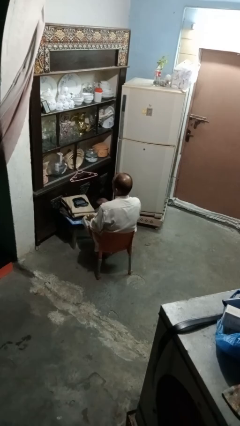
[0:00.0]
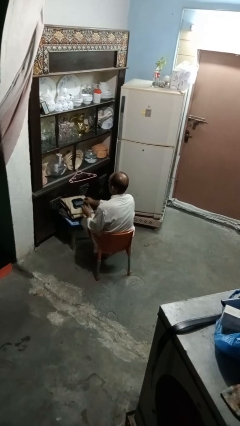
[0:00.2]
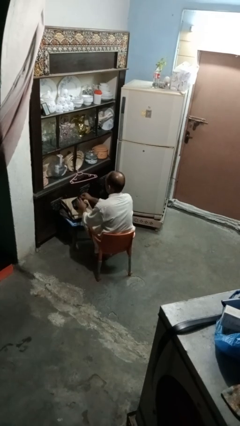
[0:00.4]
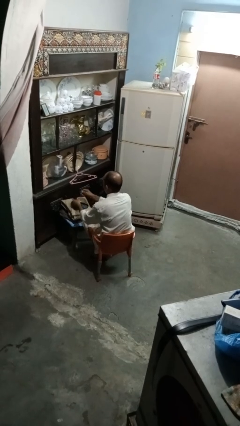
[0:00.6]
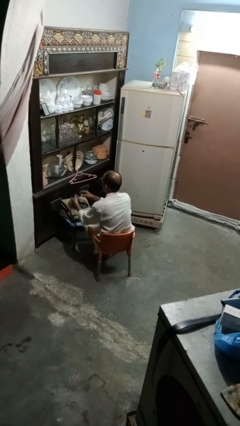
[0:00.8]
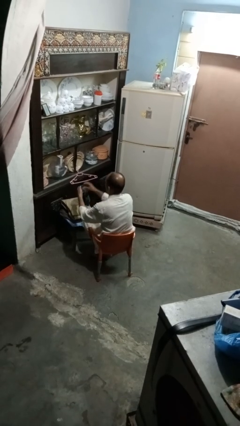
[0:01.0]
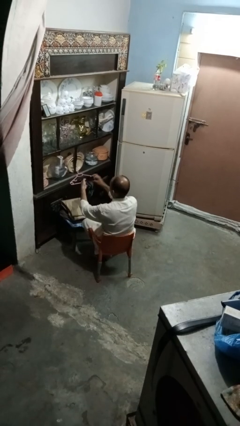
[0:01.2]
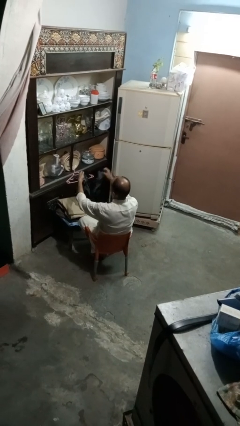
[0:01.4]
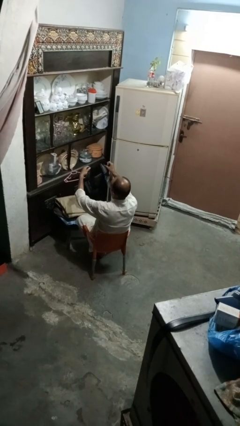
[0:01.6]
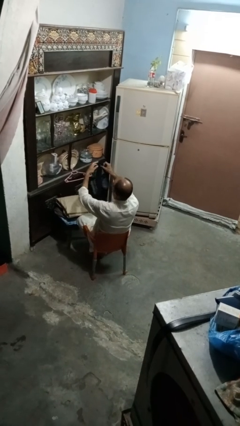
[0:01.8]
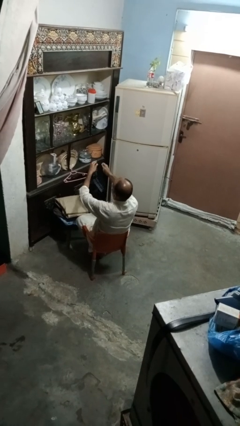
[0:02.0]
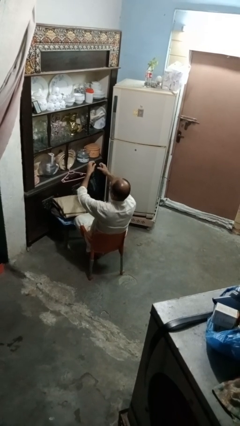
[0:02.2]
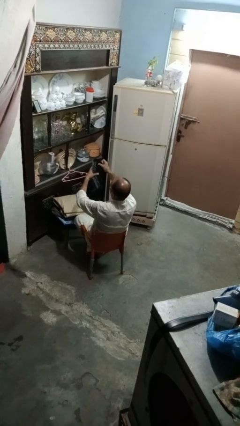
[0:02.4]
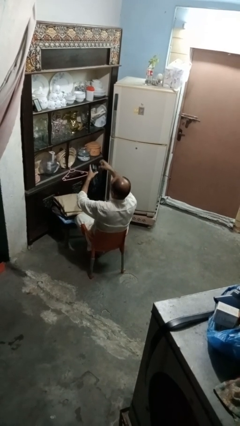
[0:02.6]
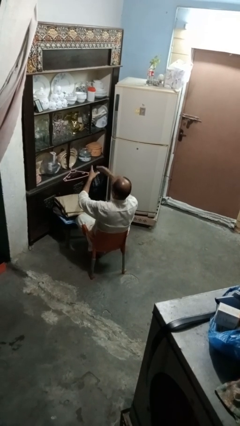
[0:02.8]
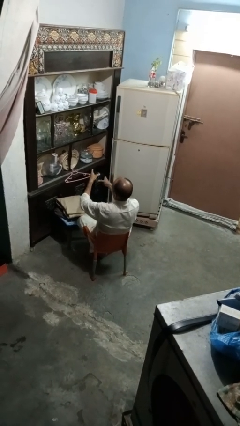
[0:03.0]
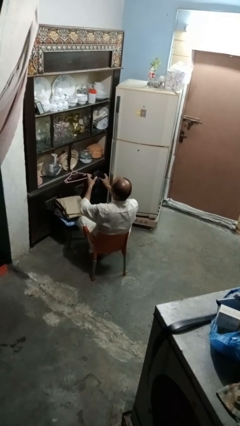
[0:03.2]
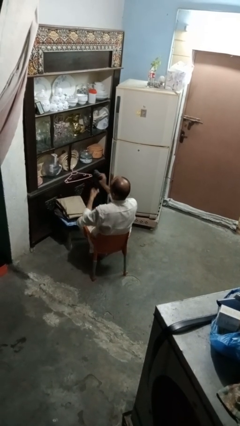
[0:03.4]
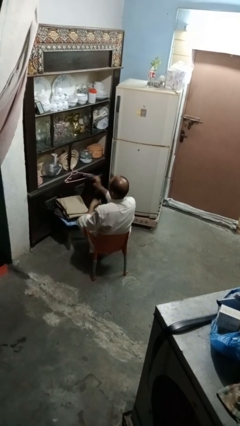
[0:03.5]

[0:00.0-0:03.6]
person folds socks

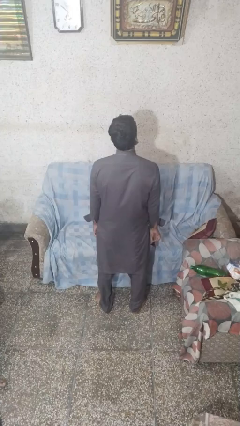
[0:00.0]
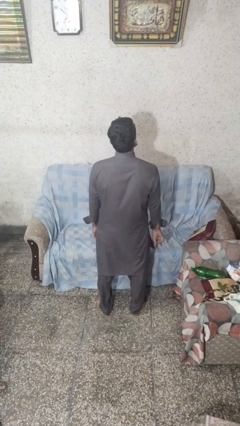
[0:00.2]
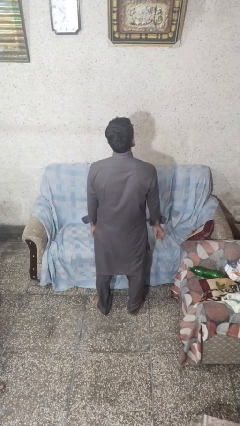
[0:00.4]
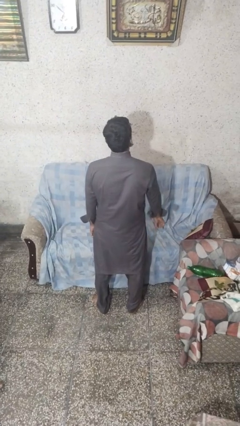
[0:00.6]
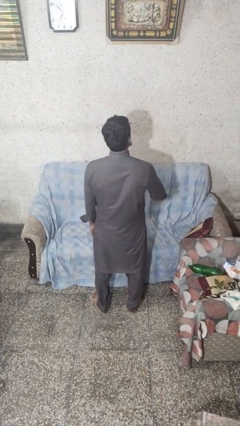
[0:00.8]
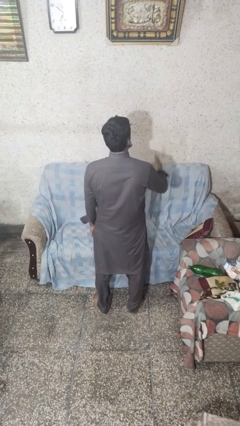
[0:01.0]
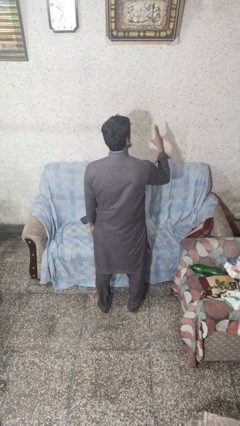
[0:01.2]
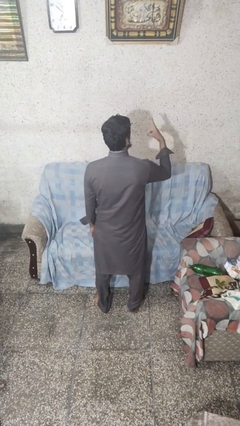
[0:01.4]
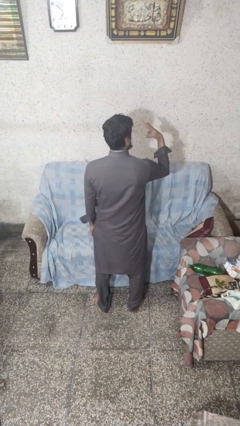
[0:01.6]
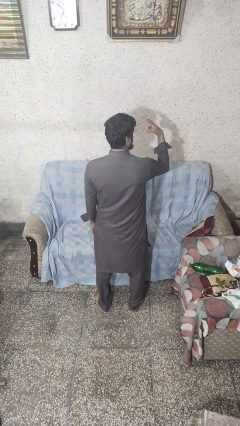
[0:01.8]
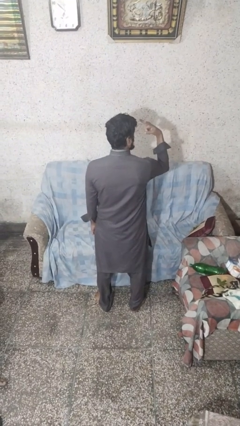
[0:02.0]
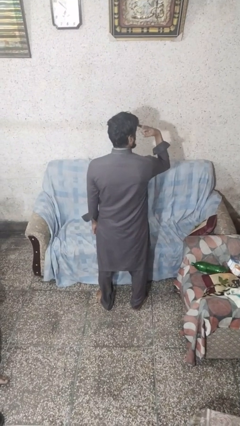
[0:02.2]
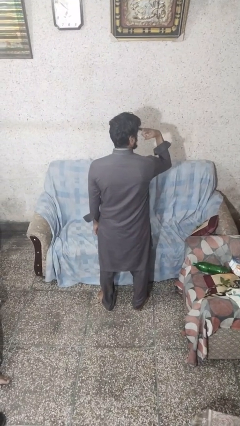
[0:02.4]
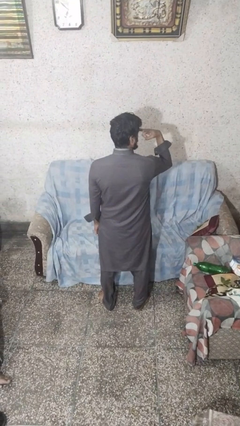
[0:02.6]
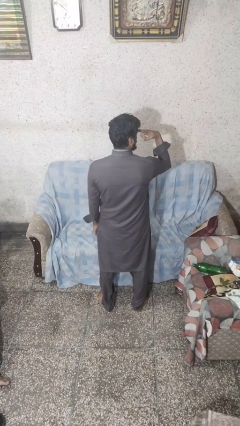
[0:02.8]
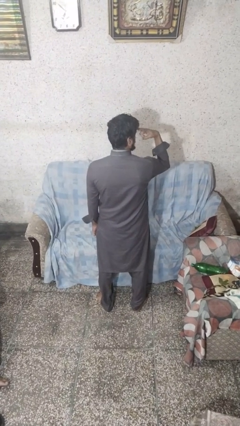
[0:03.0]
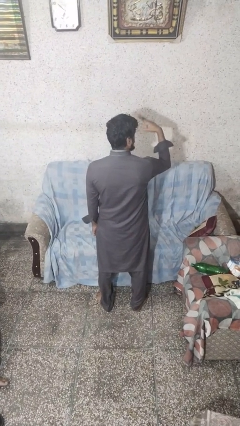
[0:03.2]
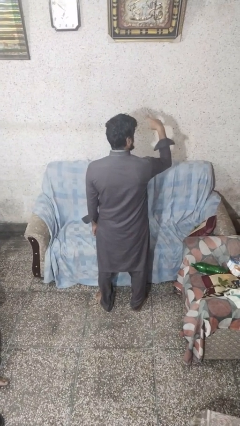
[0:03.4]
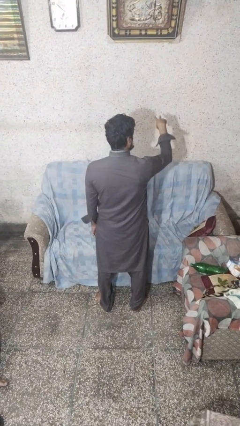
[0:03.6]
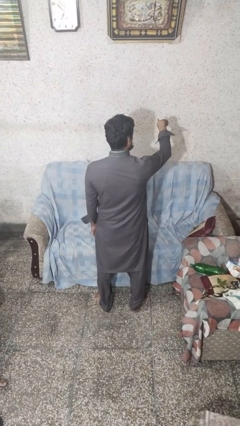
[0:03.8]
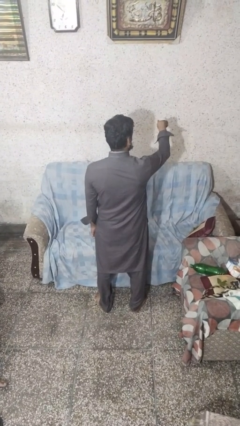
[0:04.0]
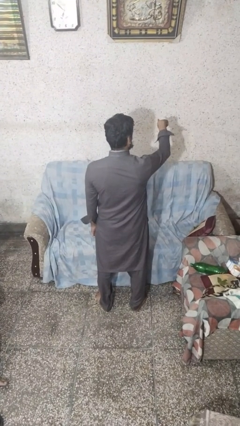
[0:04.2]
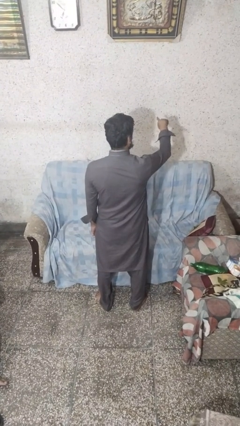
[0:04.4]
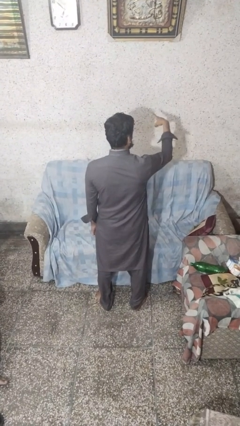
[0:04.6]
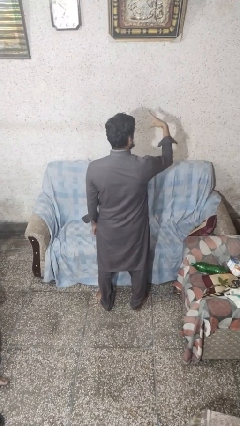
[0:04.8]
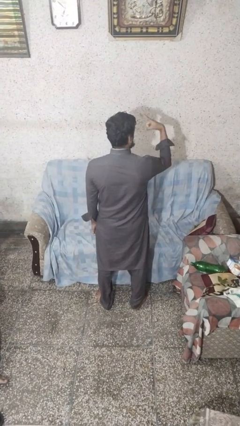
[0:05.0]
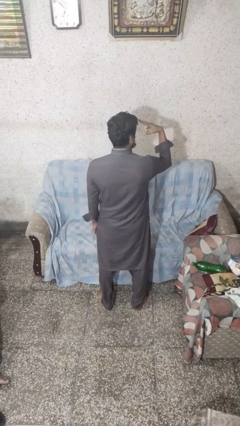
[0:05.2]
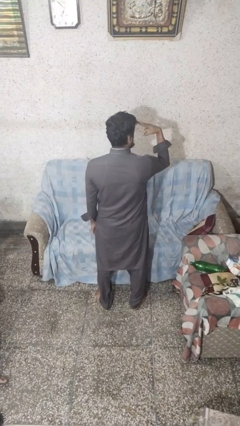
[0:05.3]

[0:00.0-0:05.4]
person gestures watch closely

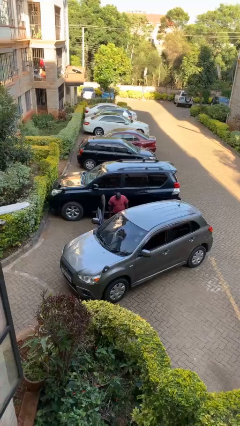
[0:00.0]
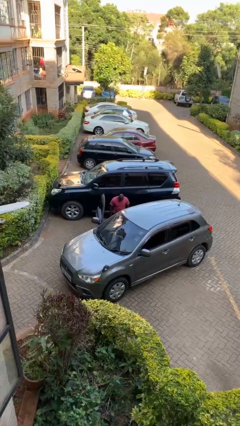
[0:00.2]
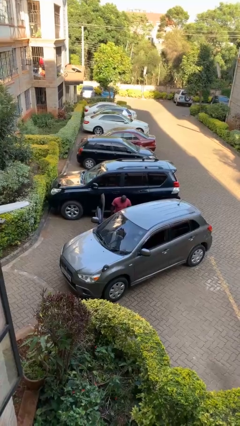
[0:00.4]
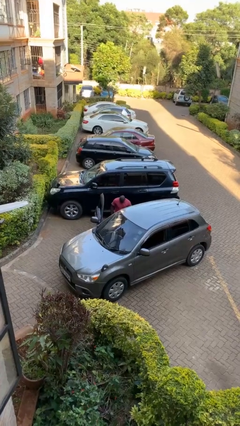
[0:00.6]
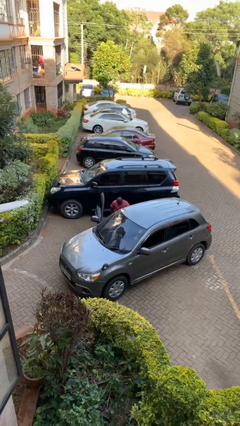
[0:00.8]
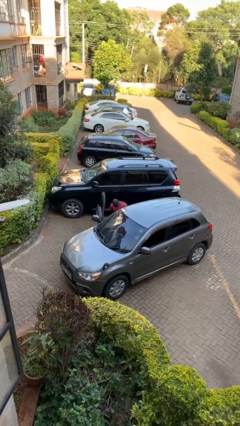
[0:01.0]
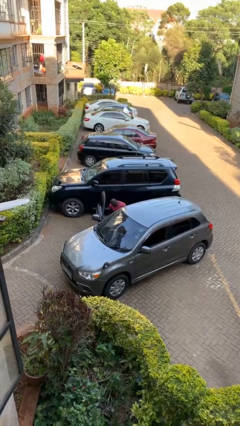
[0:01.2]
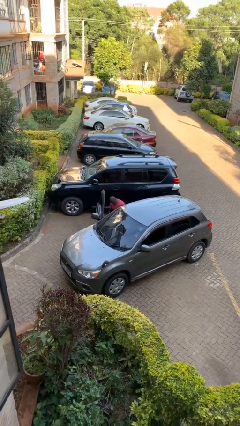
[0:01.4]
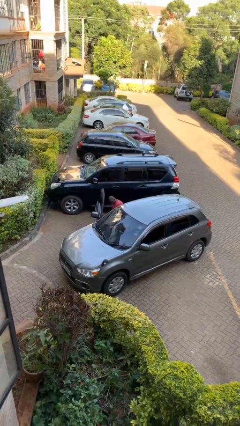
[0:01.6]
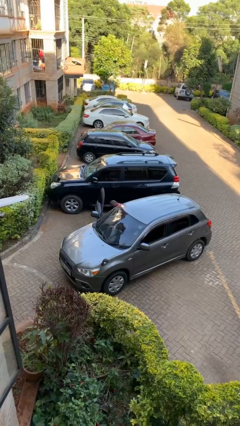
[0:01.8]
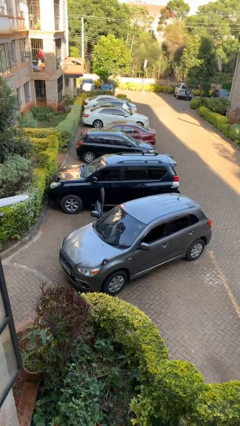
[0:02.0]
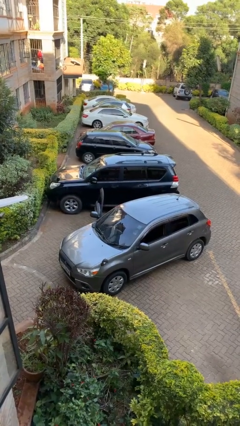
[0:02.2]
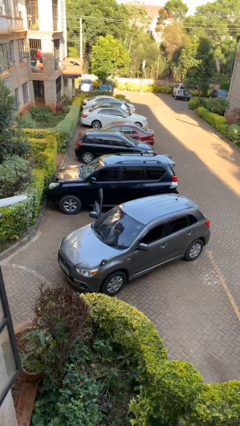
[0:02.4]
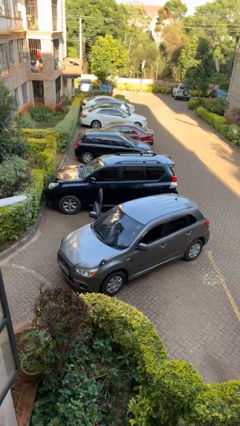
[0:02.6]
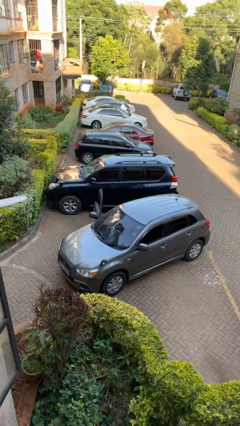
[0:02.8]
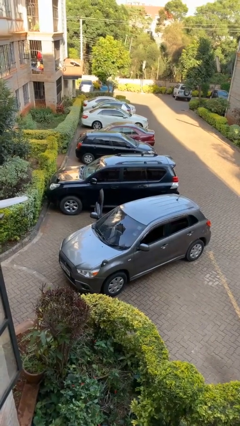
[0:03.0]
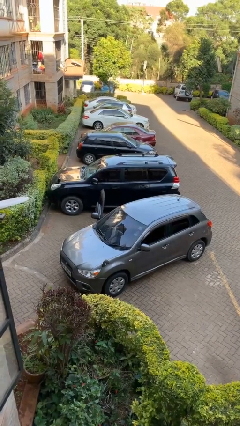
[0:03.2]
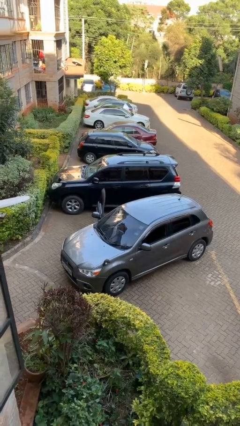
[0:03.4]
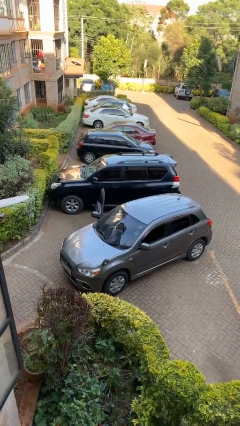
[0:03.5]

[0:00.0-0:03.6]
person enters car

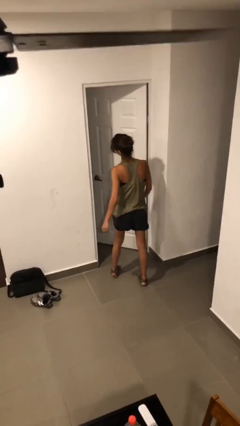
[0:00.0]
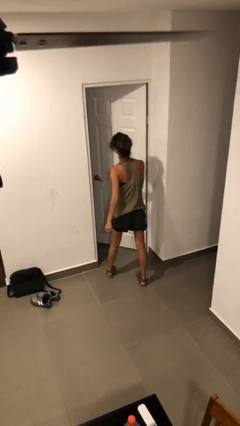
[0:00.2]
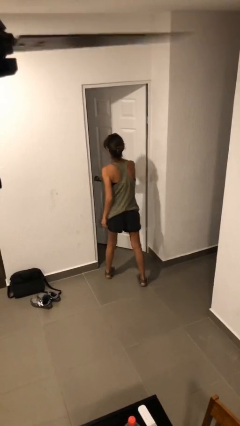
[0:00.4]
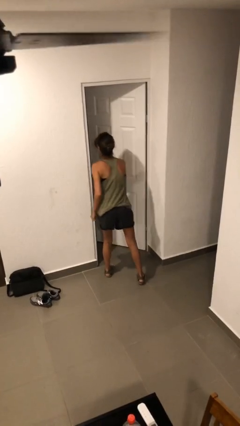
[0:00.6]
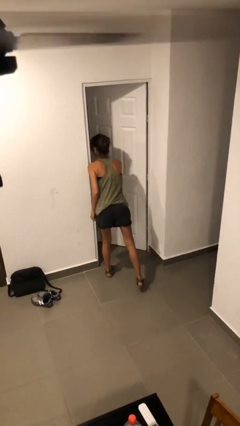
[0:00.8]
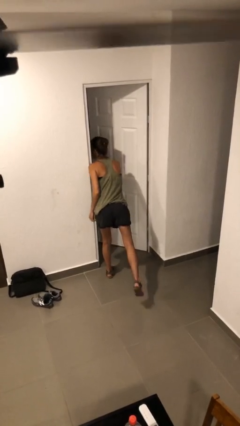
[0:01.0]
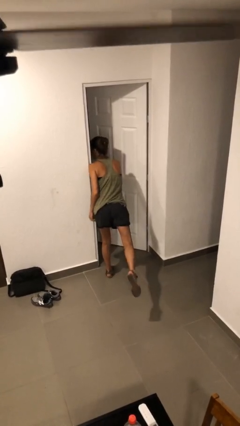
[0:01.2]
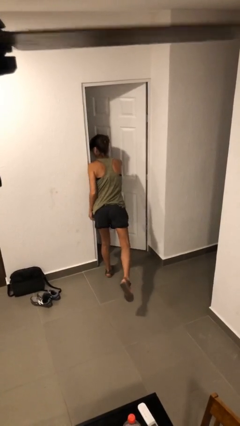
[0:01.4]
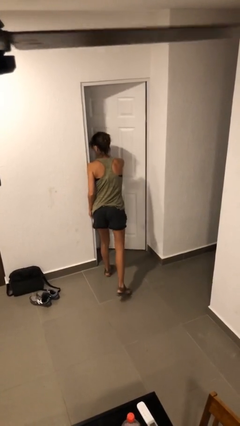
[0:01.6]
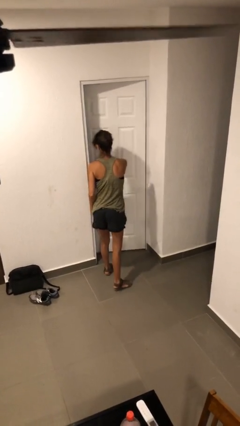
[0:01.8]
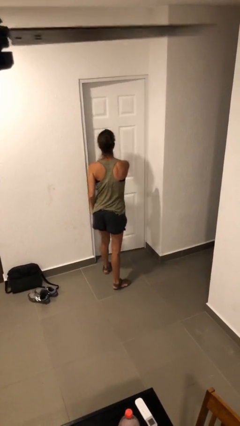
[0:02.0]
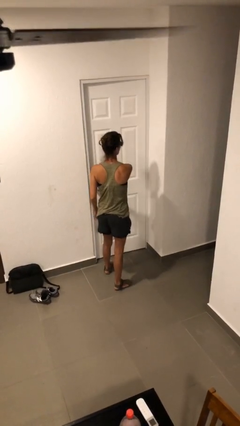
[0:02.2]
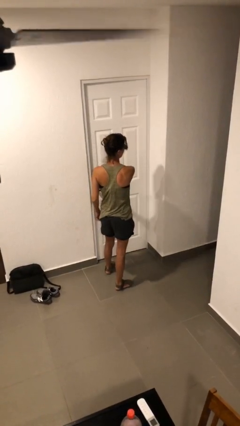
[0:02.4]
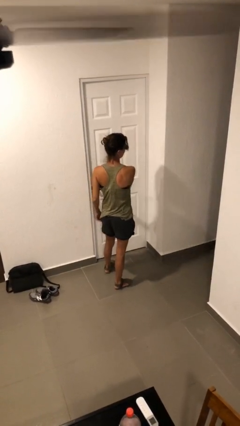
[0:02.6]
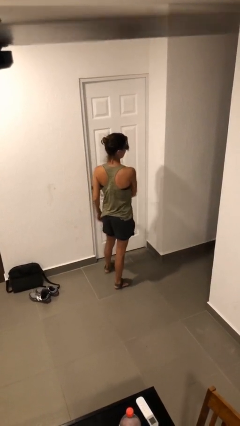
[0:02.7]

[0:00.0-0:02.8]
person closes facility door

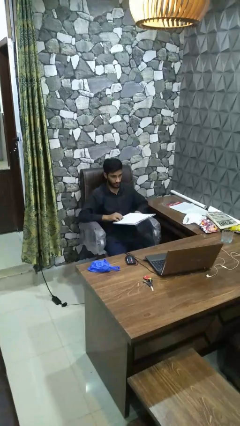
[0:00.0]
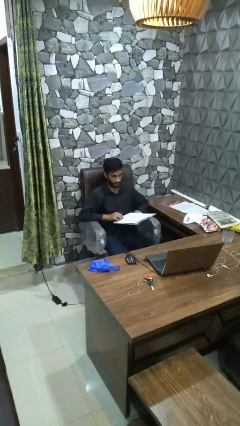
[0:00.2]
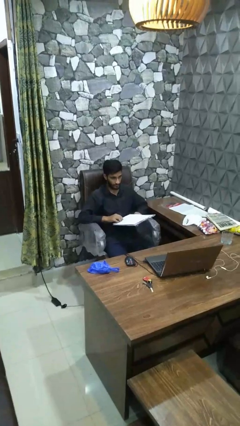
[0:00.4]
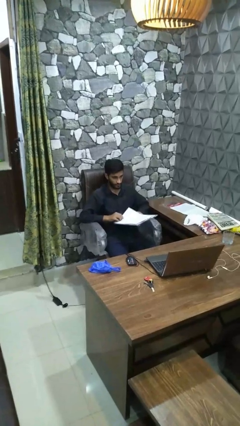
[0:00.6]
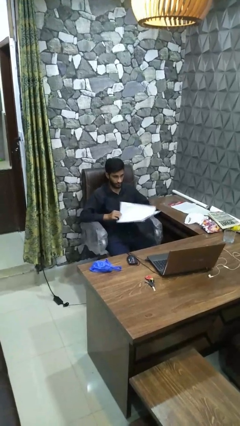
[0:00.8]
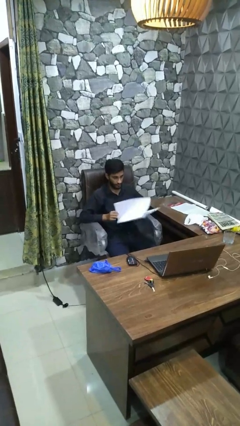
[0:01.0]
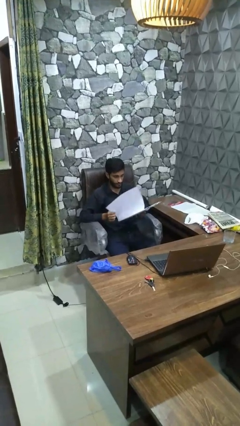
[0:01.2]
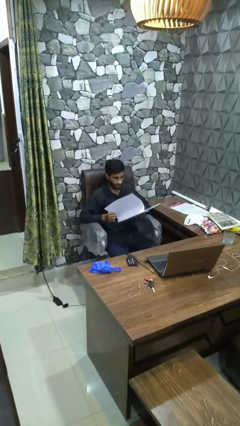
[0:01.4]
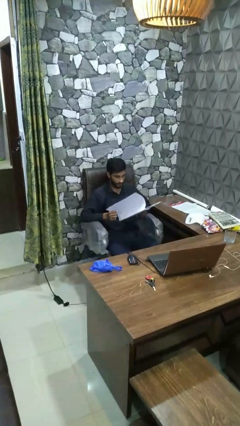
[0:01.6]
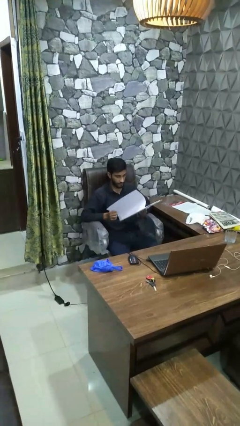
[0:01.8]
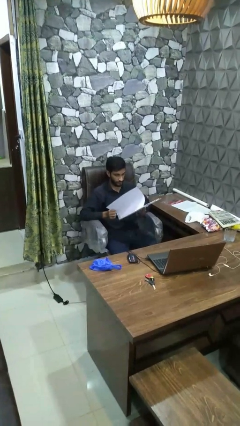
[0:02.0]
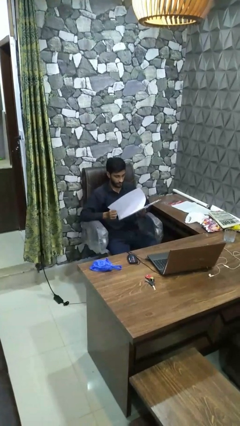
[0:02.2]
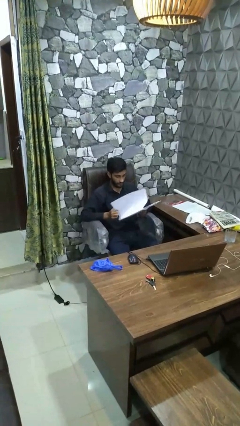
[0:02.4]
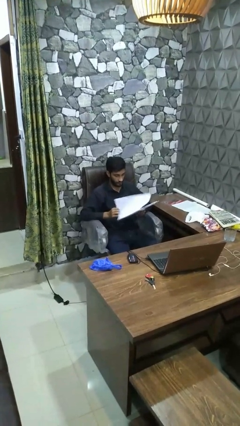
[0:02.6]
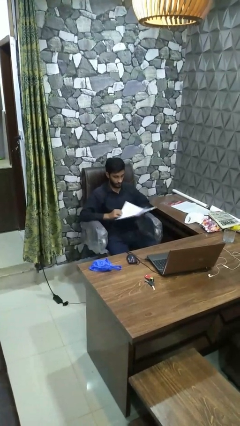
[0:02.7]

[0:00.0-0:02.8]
person reads book
